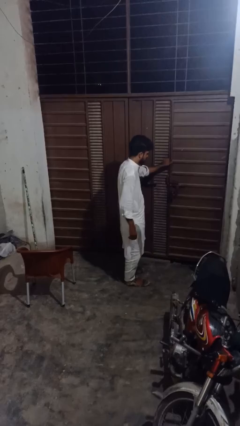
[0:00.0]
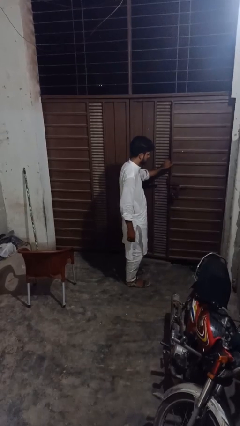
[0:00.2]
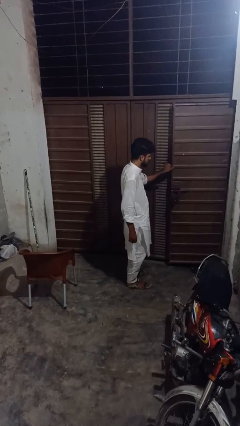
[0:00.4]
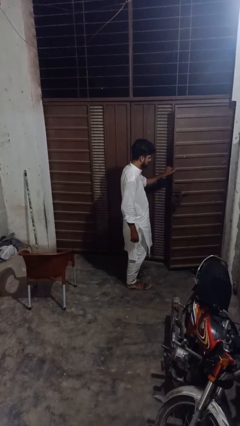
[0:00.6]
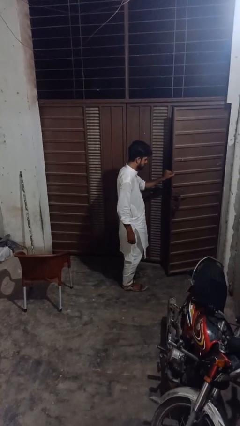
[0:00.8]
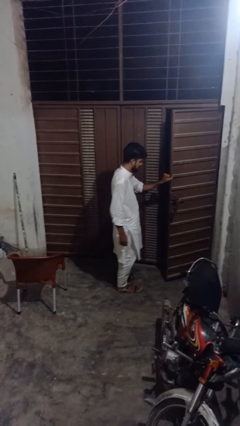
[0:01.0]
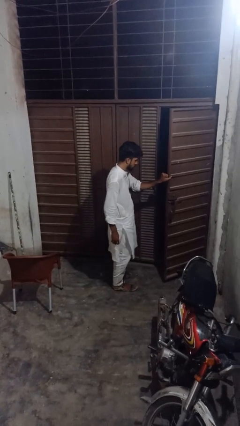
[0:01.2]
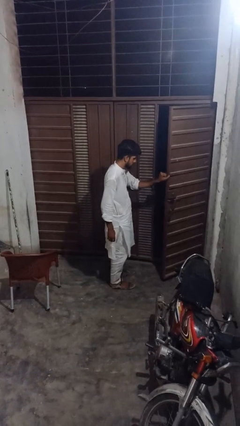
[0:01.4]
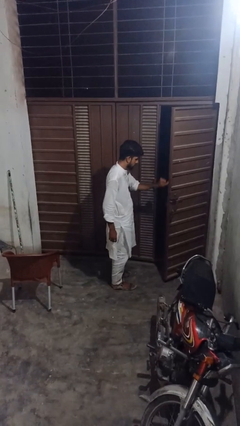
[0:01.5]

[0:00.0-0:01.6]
person opens facility door

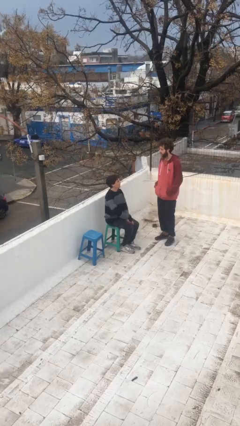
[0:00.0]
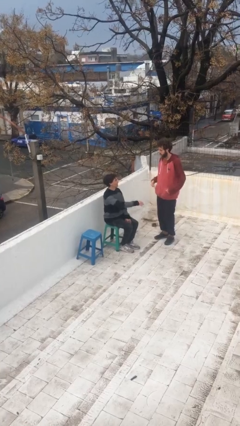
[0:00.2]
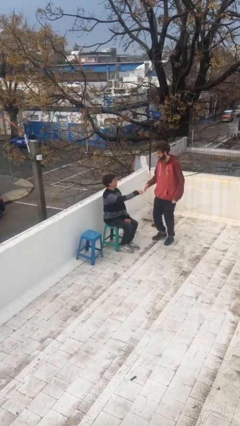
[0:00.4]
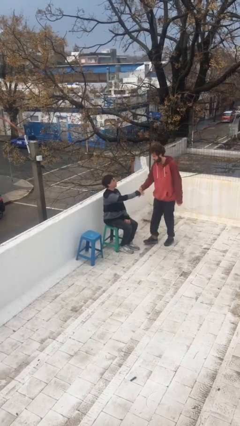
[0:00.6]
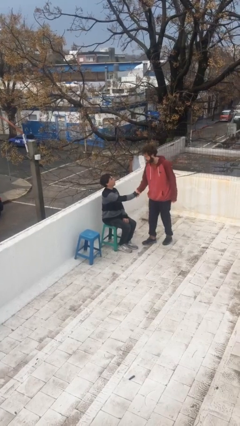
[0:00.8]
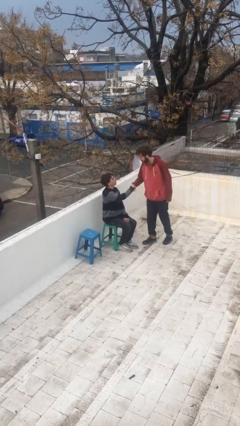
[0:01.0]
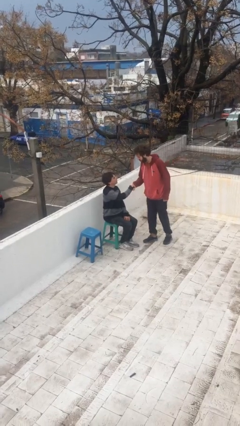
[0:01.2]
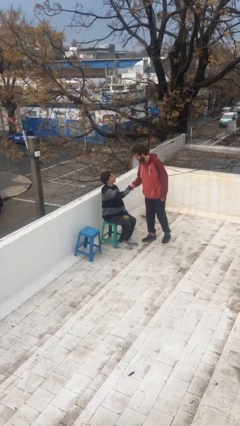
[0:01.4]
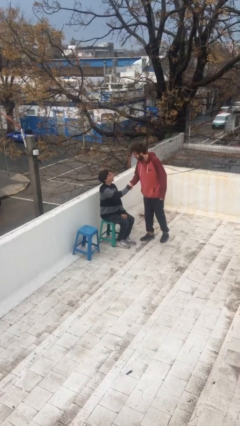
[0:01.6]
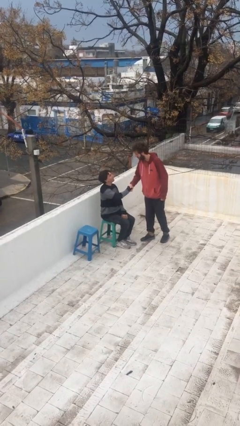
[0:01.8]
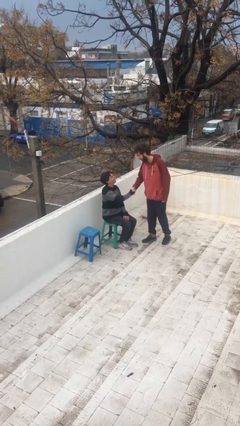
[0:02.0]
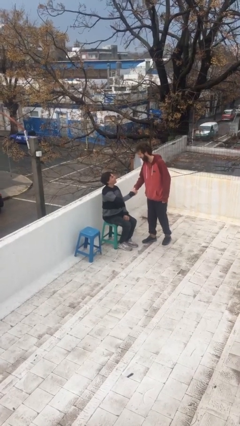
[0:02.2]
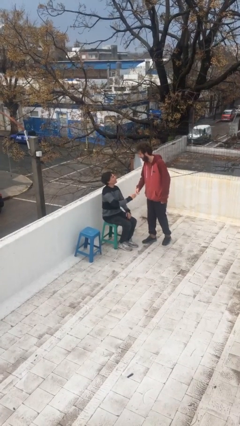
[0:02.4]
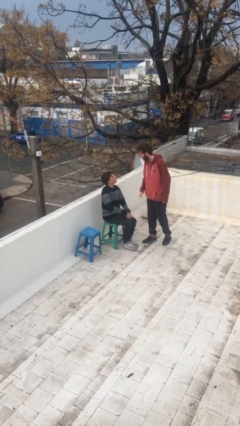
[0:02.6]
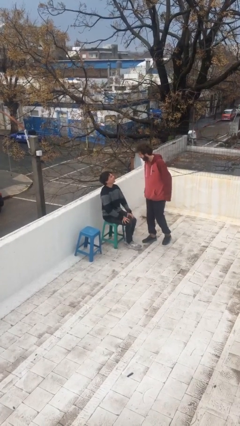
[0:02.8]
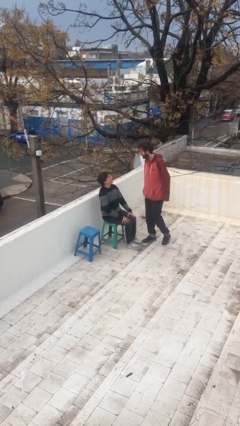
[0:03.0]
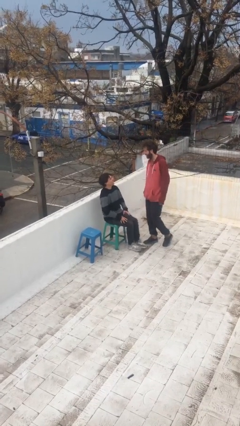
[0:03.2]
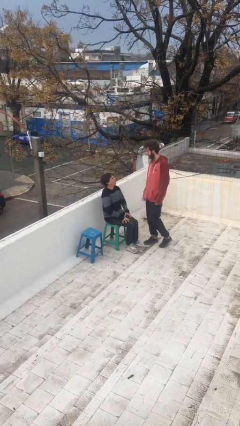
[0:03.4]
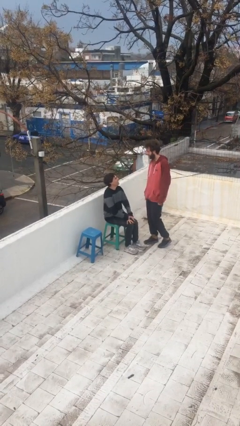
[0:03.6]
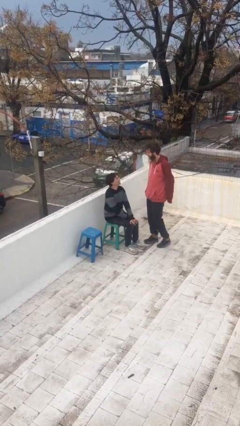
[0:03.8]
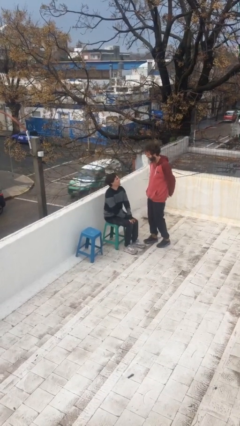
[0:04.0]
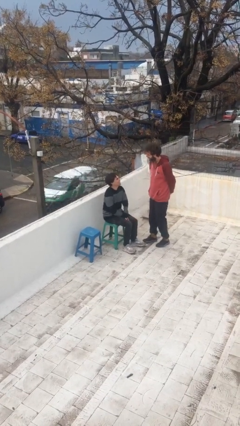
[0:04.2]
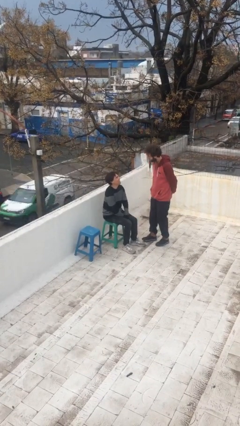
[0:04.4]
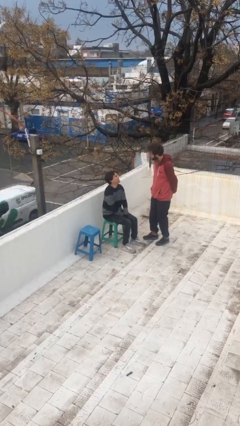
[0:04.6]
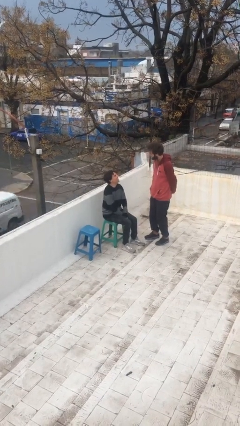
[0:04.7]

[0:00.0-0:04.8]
person shakes hand

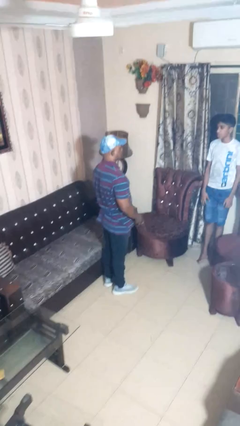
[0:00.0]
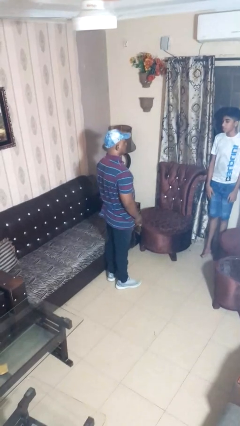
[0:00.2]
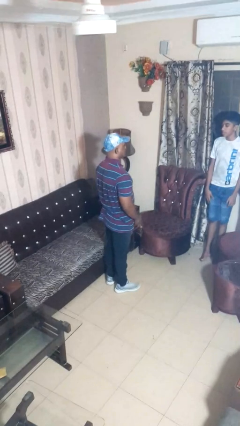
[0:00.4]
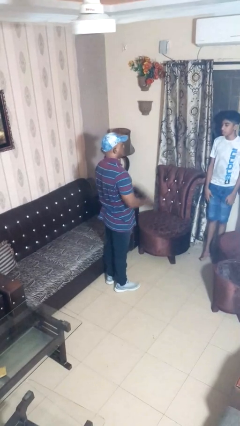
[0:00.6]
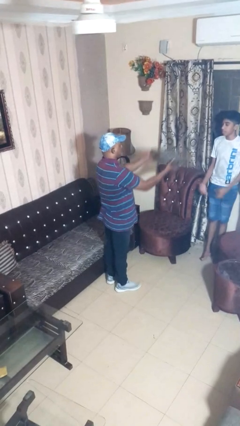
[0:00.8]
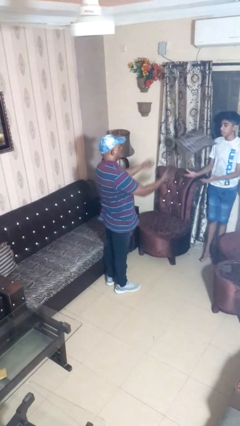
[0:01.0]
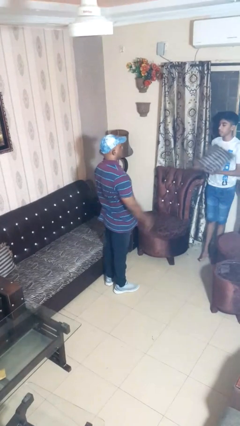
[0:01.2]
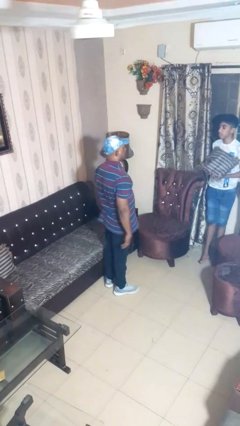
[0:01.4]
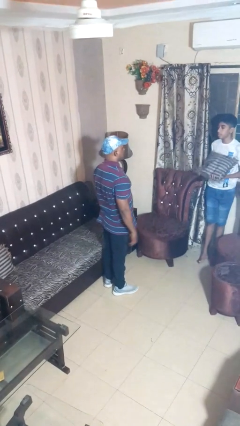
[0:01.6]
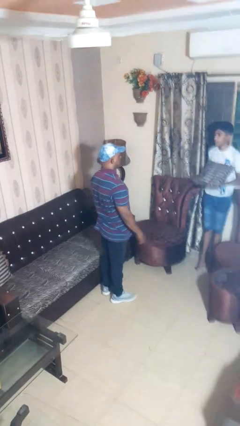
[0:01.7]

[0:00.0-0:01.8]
person throws object to person

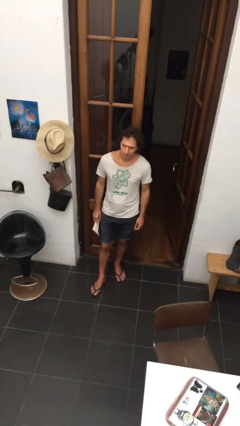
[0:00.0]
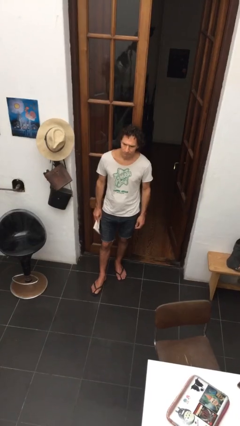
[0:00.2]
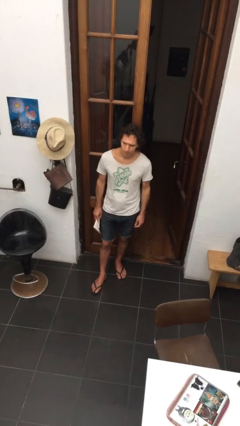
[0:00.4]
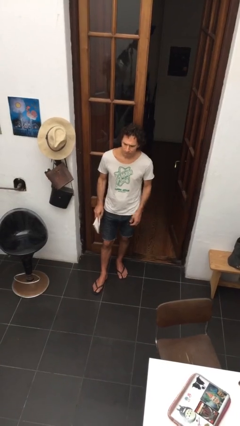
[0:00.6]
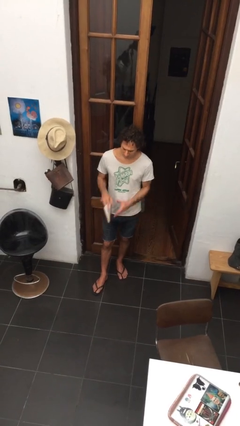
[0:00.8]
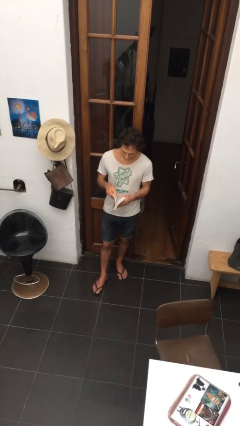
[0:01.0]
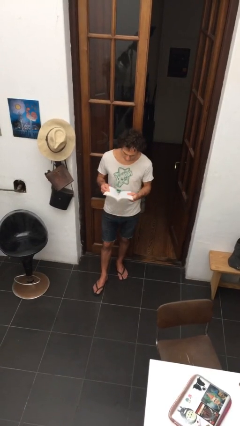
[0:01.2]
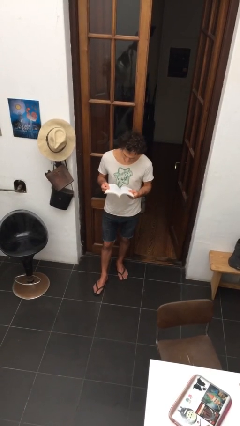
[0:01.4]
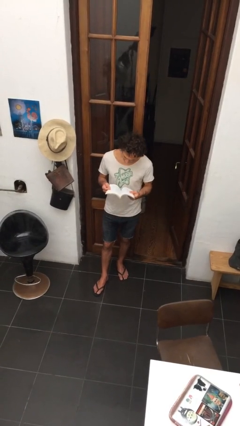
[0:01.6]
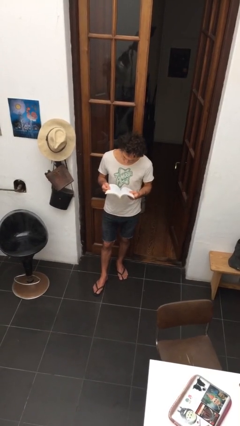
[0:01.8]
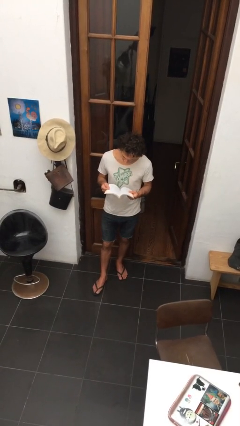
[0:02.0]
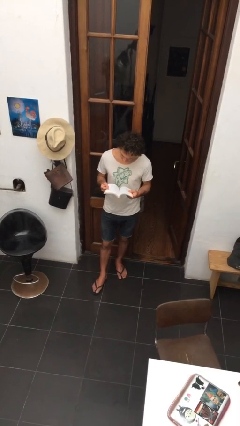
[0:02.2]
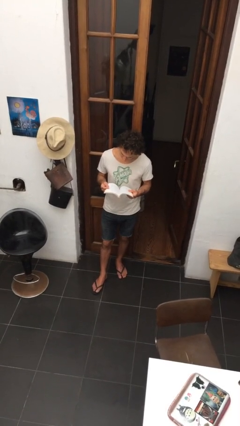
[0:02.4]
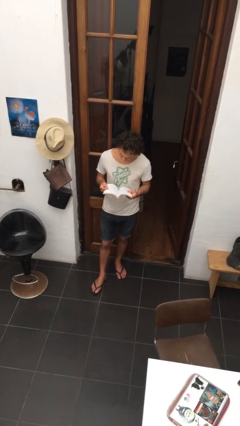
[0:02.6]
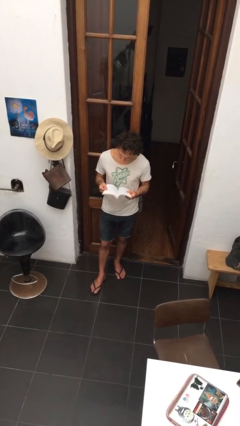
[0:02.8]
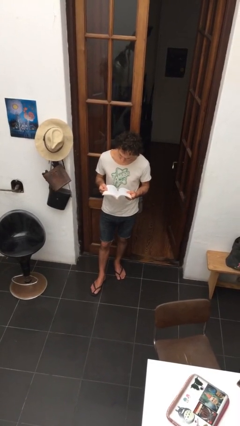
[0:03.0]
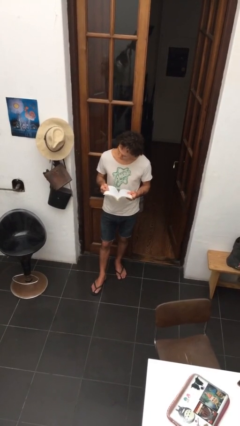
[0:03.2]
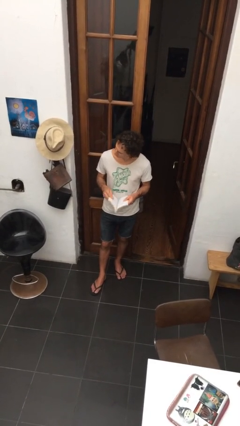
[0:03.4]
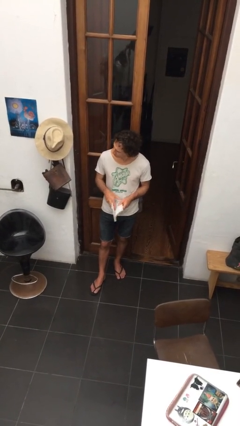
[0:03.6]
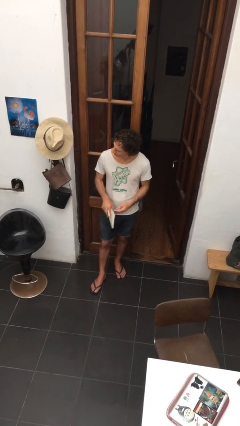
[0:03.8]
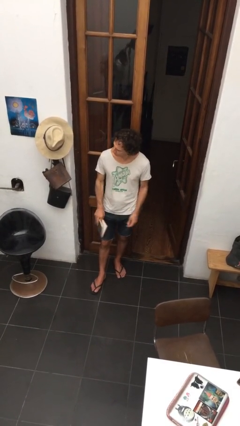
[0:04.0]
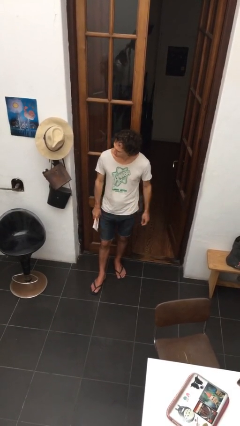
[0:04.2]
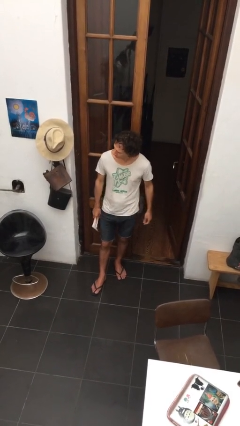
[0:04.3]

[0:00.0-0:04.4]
person reads document

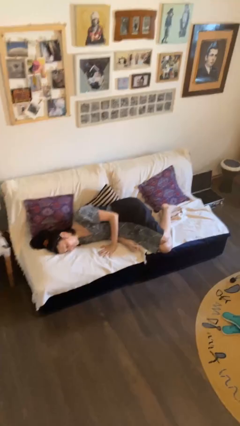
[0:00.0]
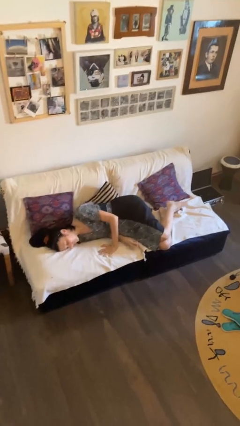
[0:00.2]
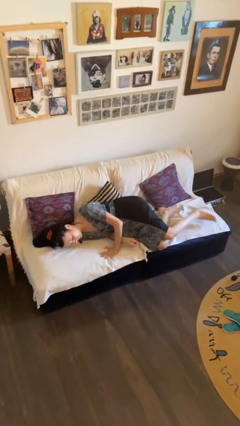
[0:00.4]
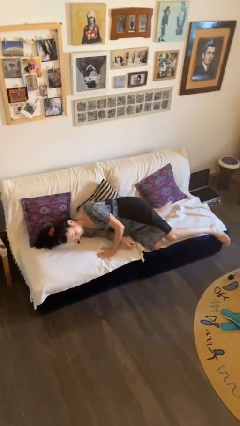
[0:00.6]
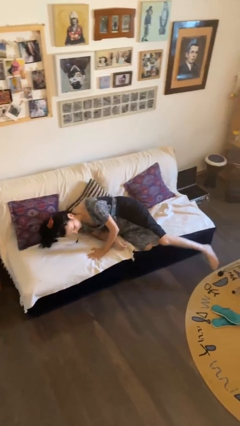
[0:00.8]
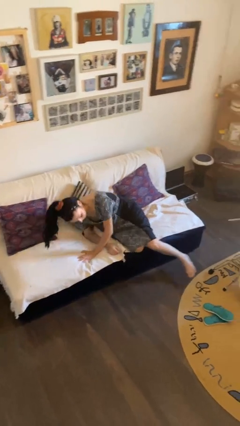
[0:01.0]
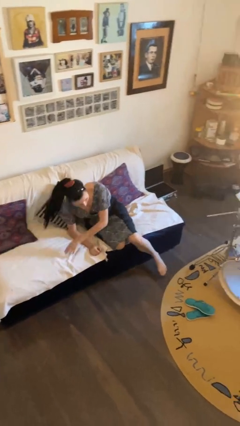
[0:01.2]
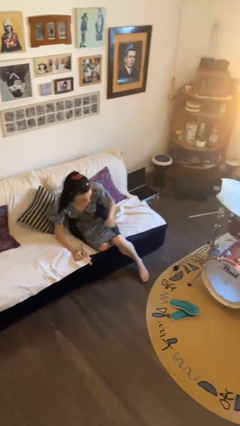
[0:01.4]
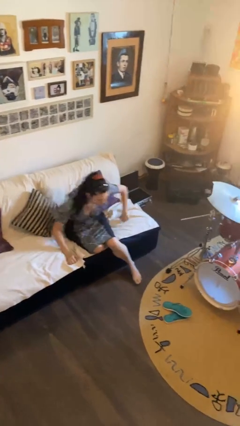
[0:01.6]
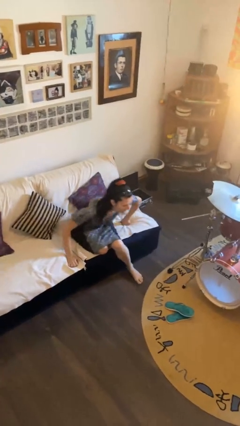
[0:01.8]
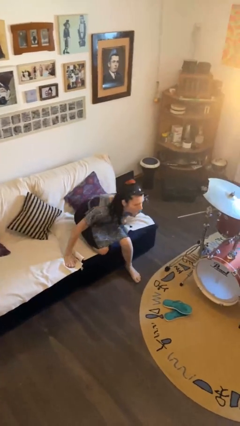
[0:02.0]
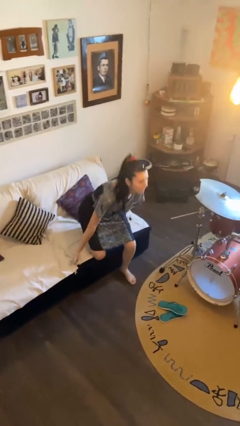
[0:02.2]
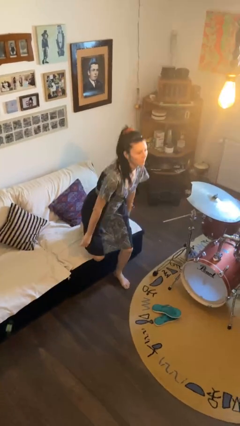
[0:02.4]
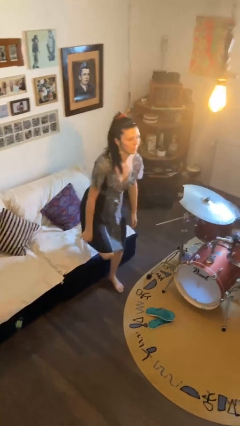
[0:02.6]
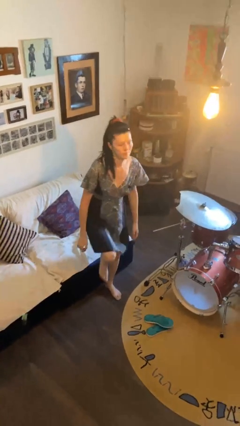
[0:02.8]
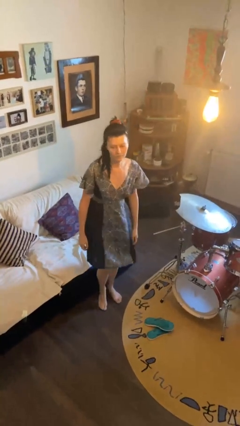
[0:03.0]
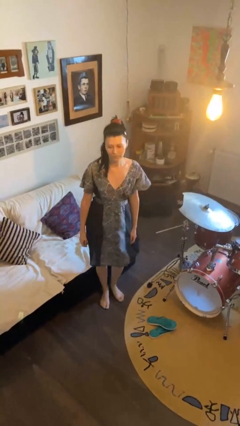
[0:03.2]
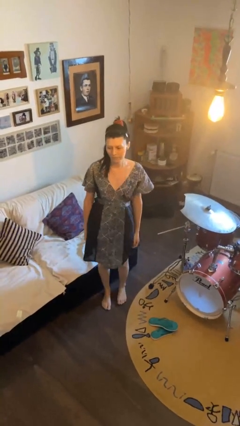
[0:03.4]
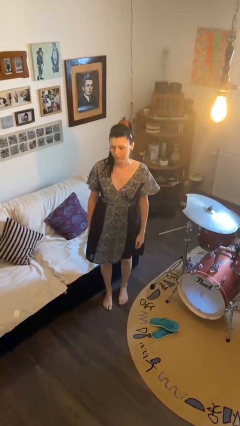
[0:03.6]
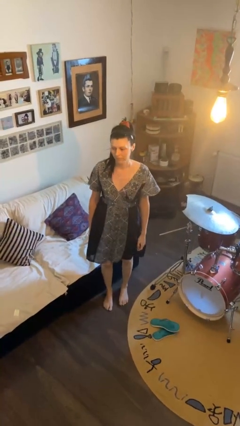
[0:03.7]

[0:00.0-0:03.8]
person stands up

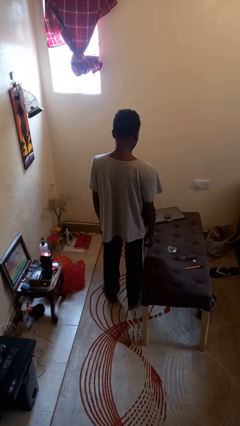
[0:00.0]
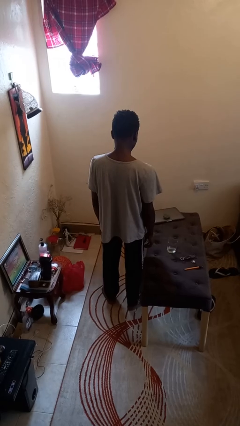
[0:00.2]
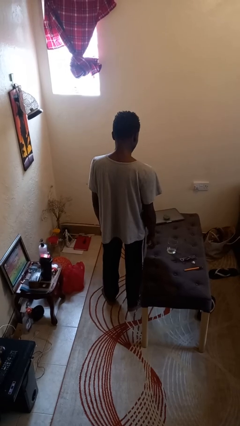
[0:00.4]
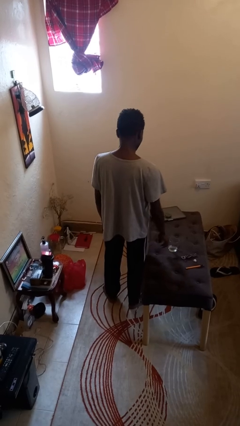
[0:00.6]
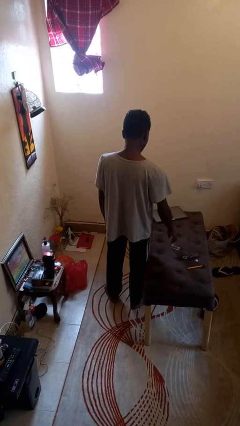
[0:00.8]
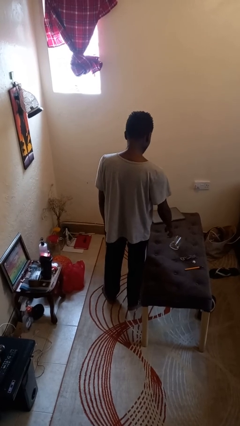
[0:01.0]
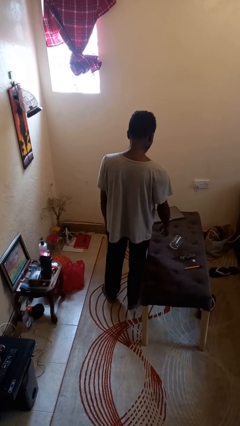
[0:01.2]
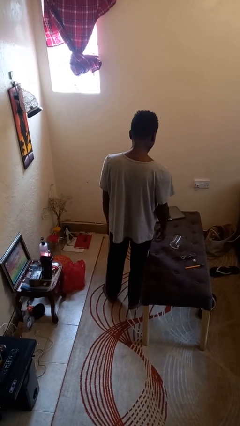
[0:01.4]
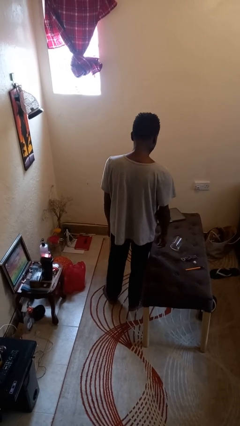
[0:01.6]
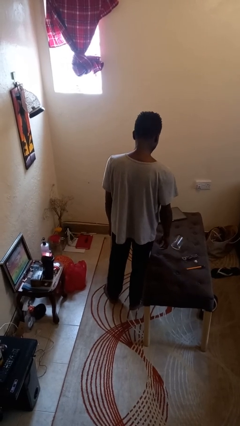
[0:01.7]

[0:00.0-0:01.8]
person knocks over glass
